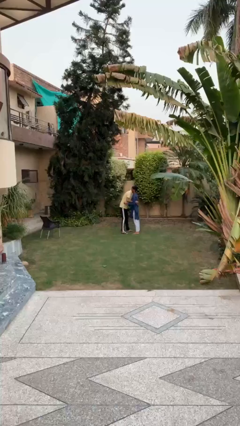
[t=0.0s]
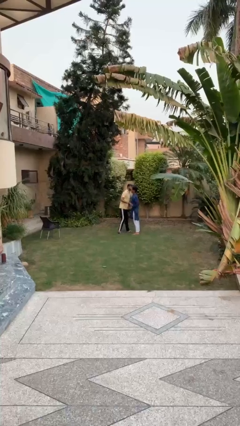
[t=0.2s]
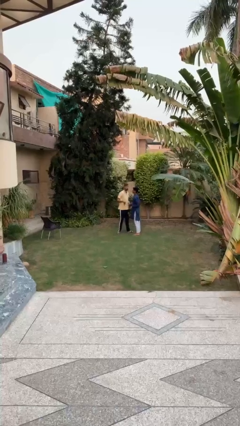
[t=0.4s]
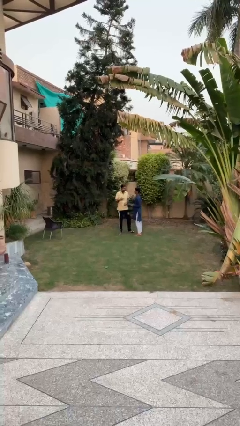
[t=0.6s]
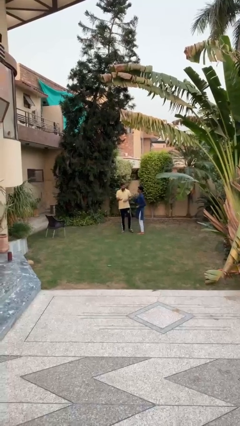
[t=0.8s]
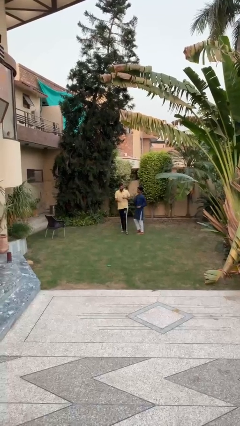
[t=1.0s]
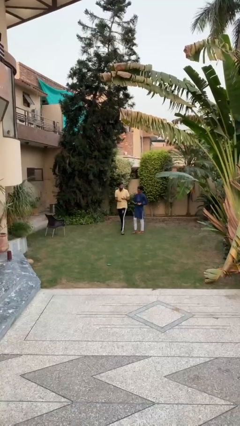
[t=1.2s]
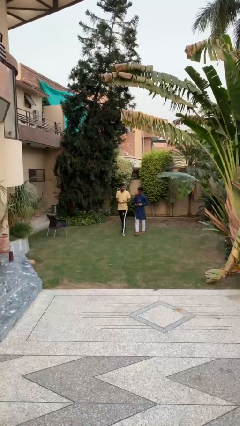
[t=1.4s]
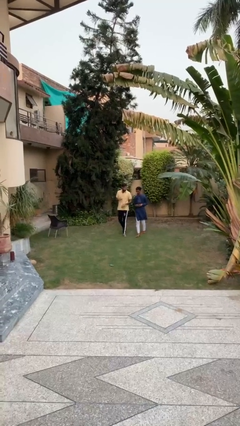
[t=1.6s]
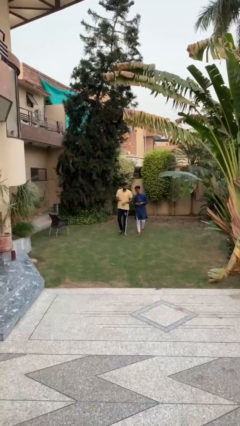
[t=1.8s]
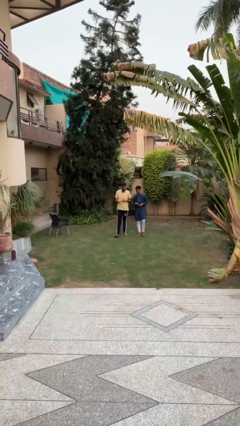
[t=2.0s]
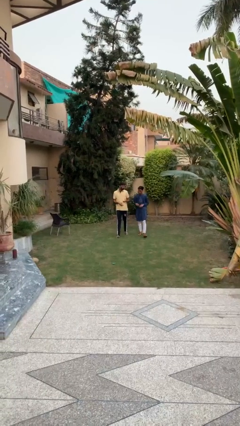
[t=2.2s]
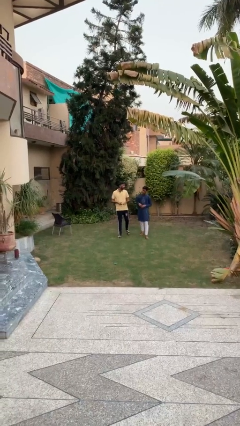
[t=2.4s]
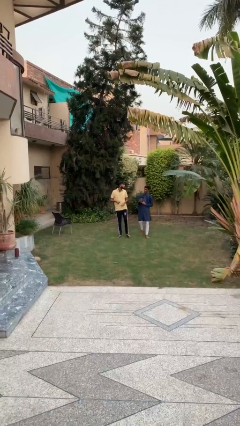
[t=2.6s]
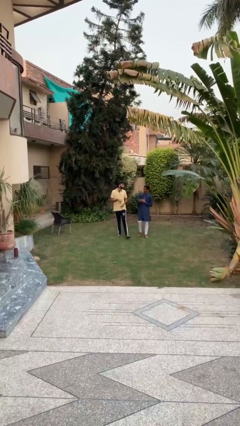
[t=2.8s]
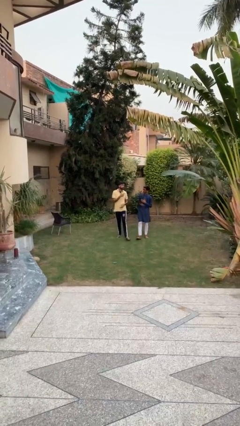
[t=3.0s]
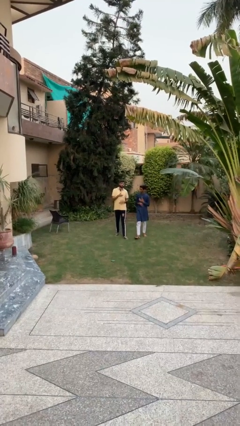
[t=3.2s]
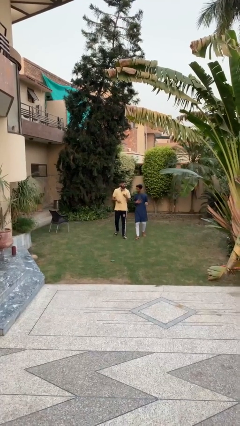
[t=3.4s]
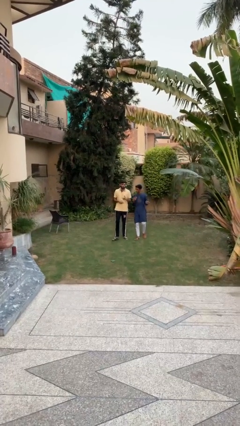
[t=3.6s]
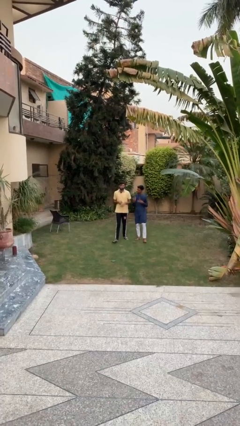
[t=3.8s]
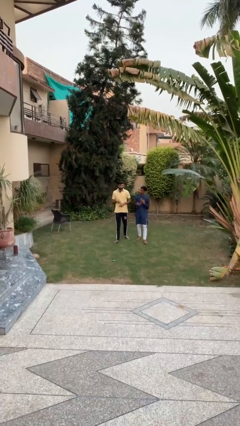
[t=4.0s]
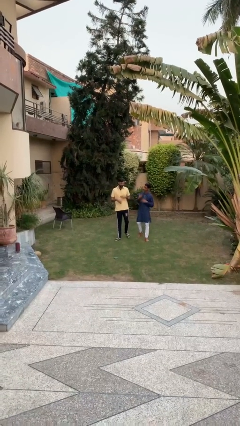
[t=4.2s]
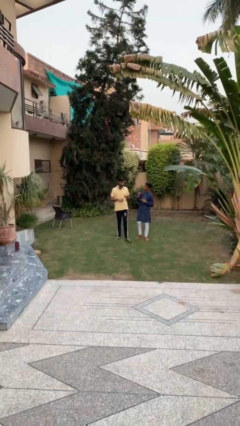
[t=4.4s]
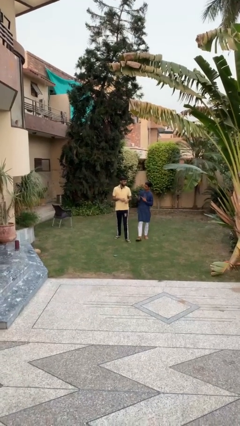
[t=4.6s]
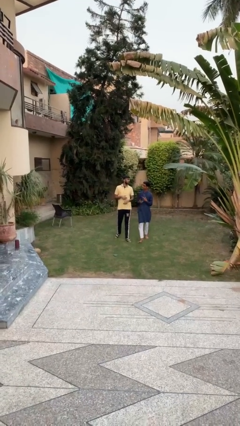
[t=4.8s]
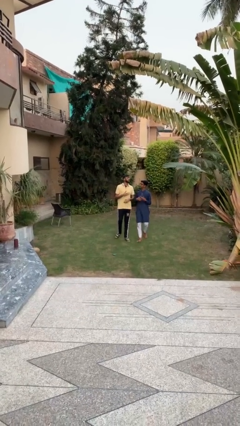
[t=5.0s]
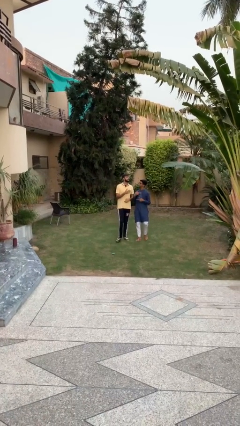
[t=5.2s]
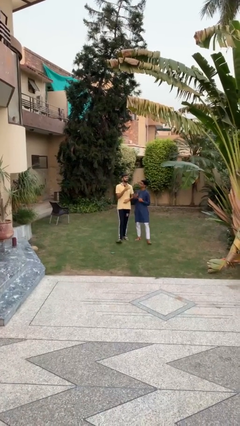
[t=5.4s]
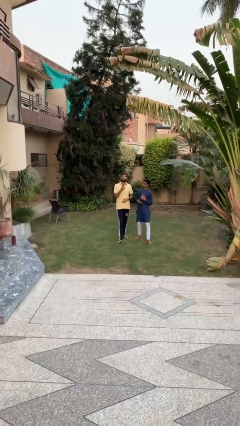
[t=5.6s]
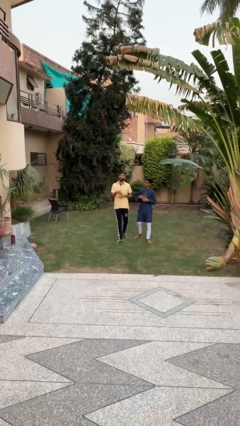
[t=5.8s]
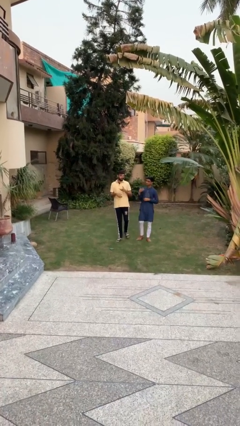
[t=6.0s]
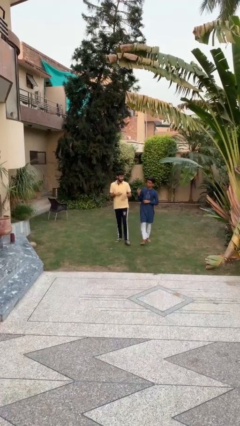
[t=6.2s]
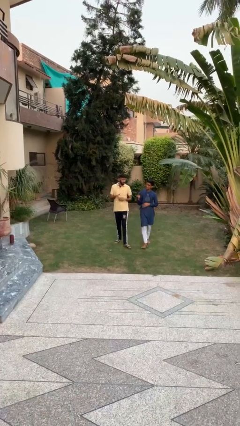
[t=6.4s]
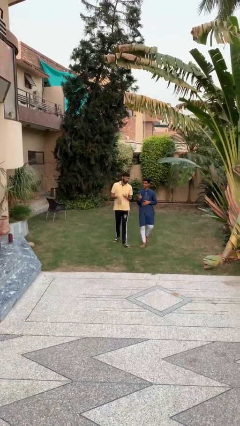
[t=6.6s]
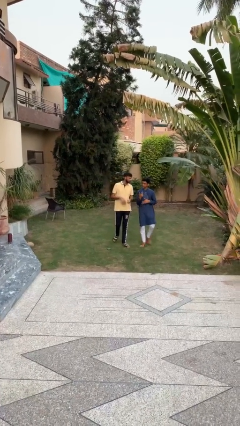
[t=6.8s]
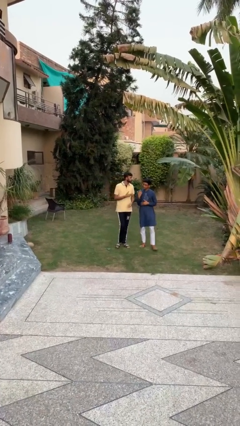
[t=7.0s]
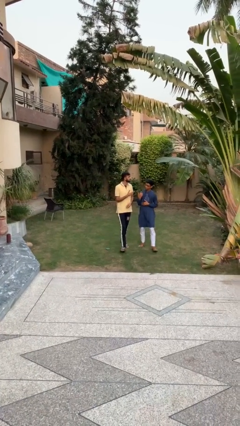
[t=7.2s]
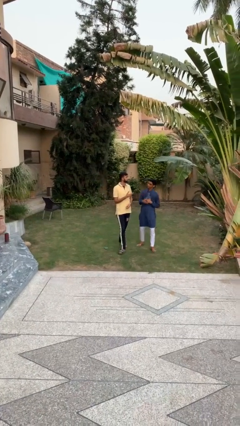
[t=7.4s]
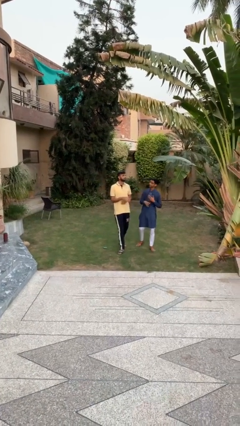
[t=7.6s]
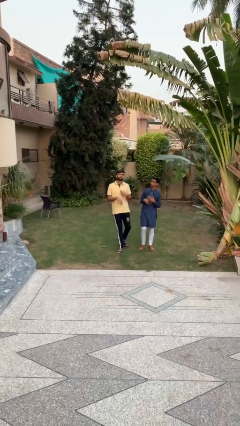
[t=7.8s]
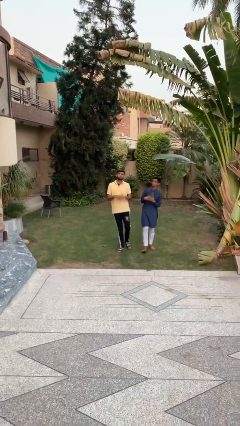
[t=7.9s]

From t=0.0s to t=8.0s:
person talks to person

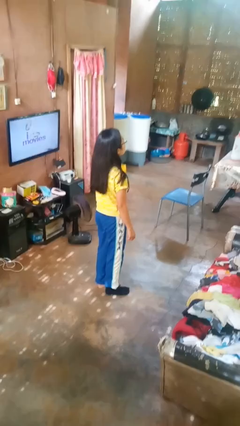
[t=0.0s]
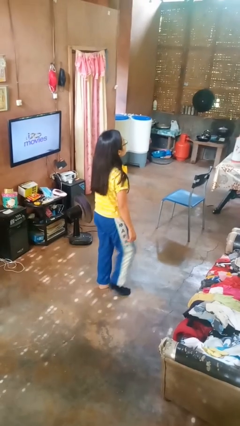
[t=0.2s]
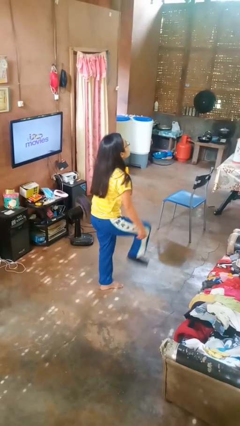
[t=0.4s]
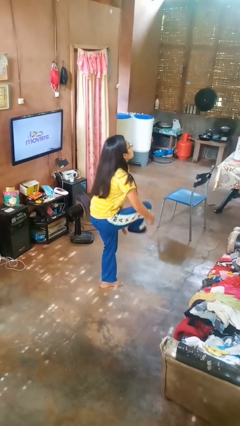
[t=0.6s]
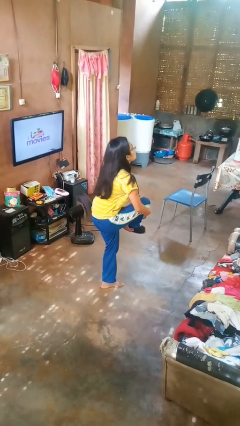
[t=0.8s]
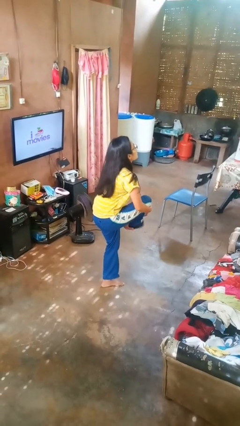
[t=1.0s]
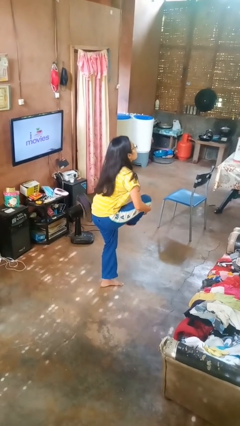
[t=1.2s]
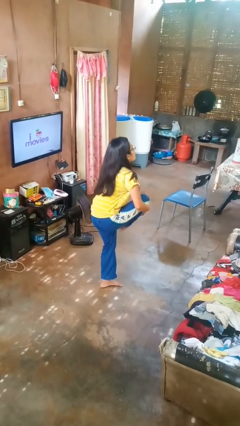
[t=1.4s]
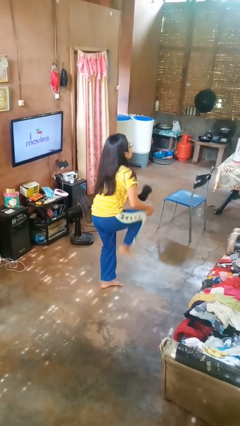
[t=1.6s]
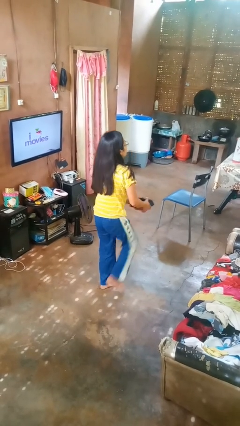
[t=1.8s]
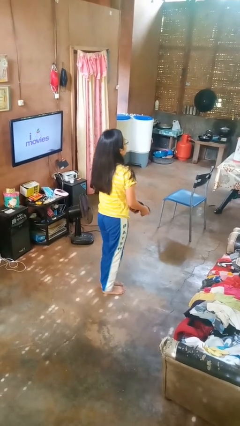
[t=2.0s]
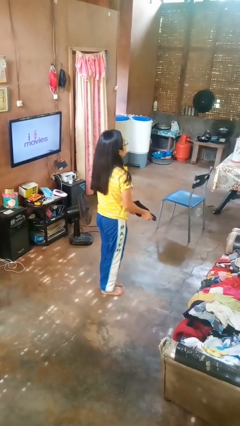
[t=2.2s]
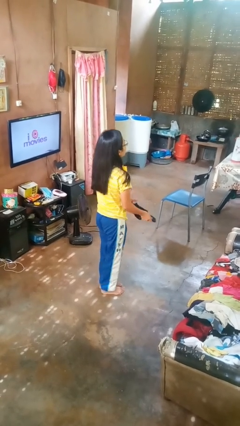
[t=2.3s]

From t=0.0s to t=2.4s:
person takes off socks

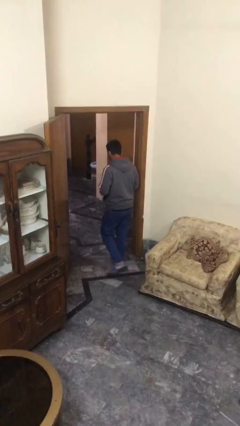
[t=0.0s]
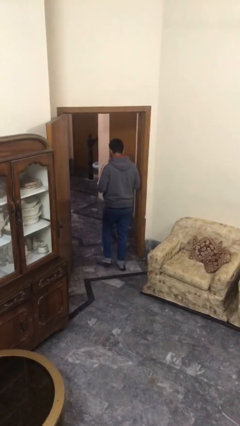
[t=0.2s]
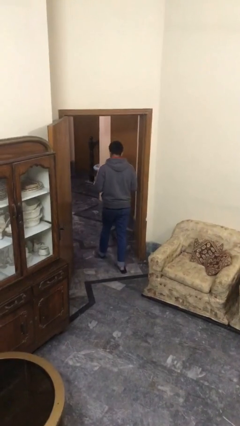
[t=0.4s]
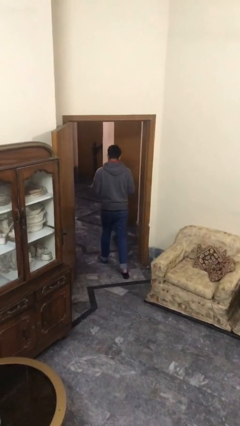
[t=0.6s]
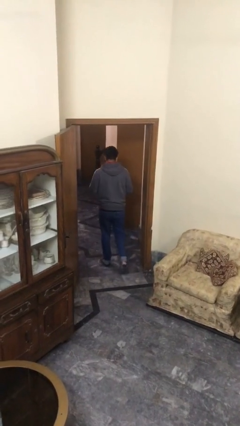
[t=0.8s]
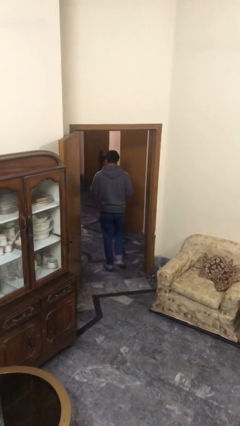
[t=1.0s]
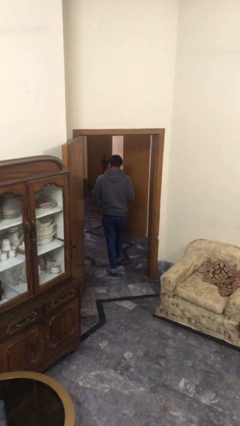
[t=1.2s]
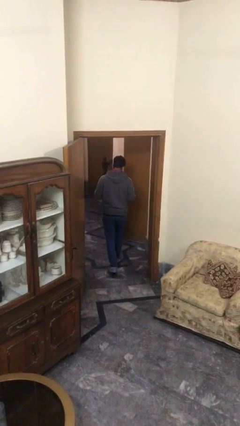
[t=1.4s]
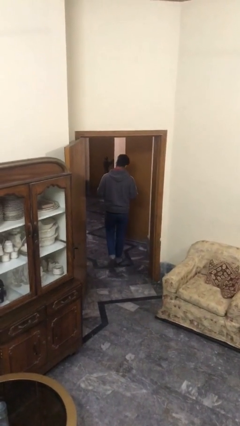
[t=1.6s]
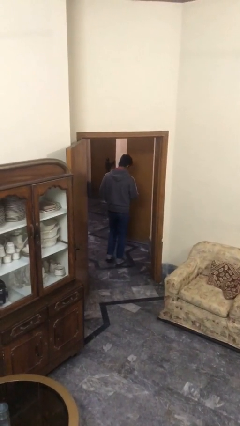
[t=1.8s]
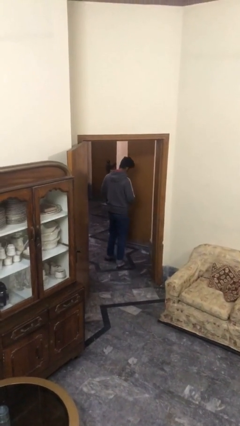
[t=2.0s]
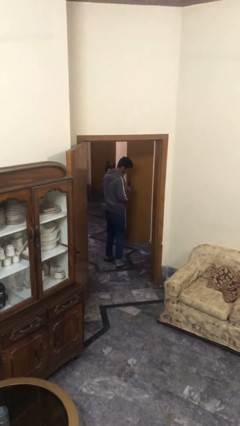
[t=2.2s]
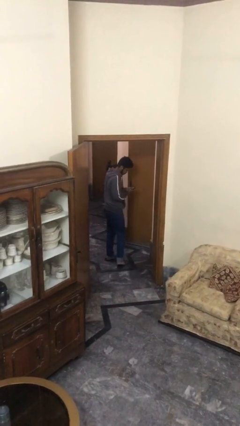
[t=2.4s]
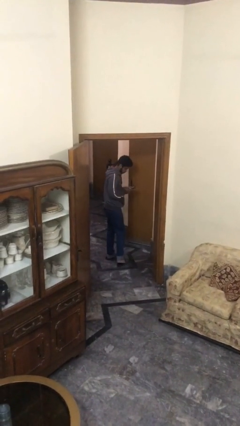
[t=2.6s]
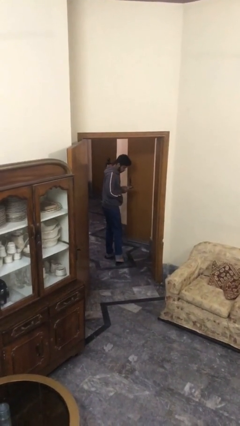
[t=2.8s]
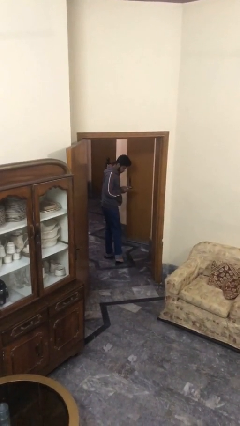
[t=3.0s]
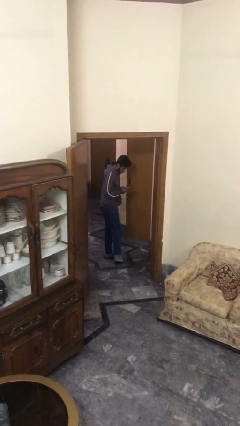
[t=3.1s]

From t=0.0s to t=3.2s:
person exits scene through structure

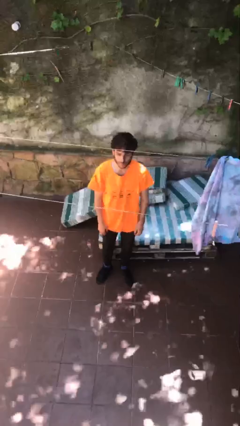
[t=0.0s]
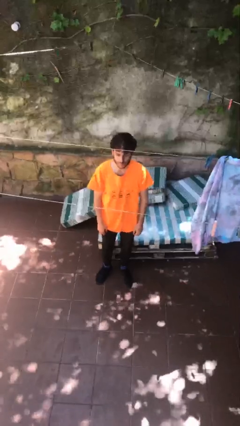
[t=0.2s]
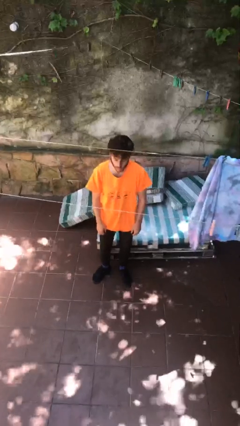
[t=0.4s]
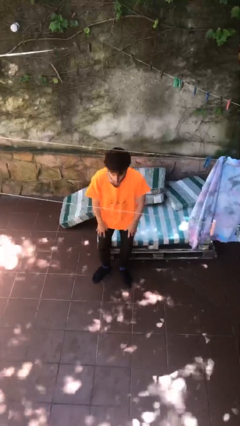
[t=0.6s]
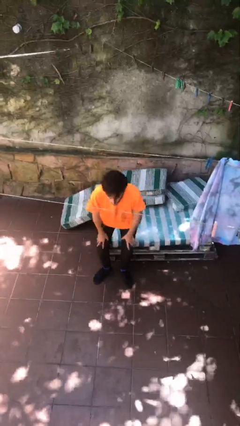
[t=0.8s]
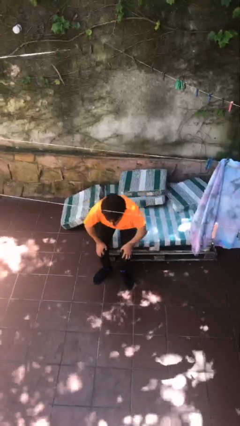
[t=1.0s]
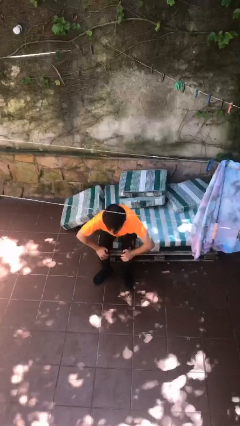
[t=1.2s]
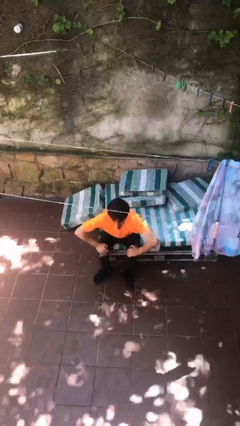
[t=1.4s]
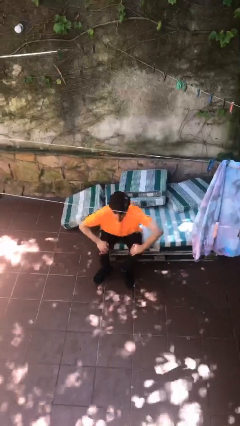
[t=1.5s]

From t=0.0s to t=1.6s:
person sits down

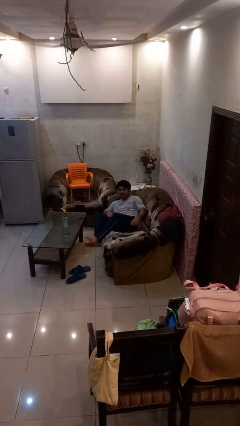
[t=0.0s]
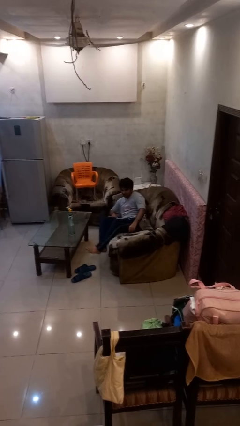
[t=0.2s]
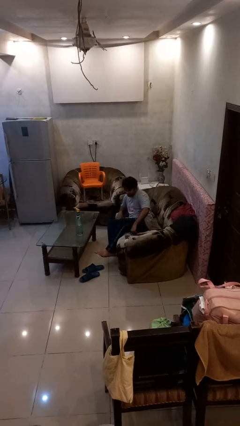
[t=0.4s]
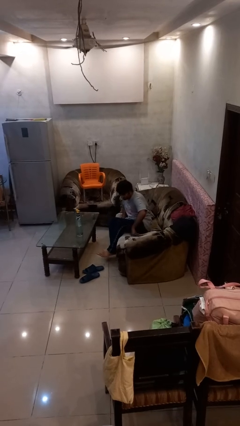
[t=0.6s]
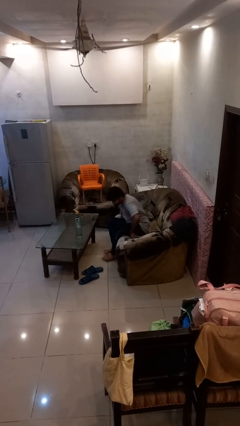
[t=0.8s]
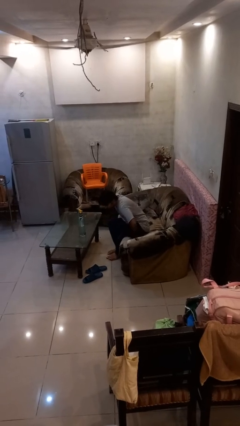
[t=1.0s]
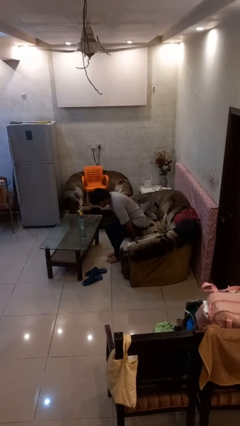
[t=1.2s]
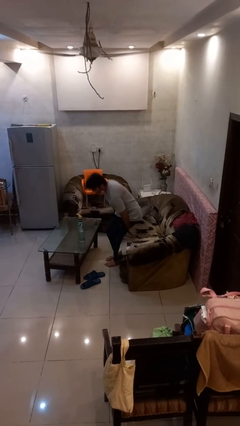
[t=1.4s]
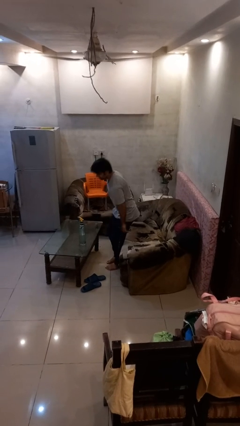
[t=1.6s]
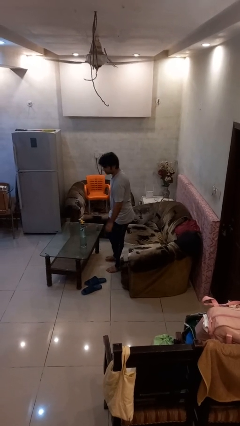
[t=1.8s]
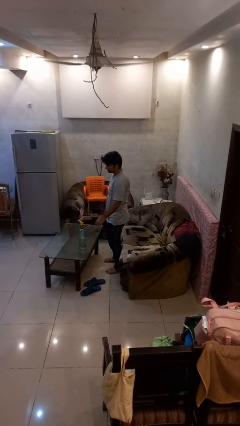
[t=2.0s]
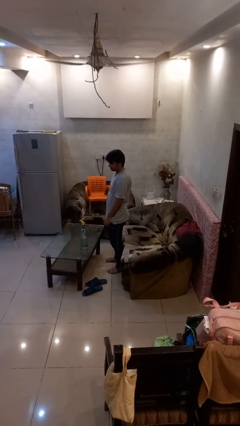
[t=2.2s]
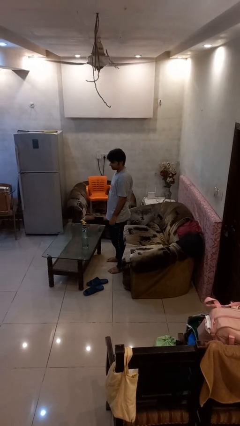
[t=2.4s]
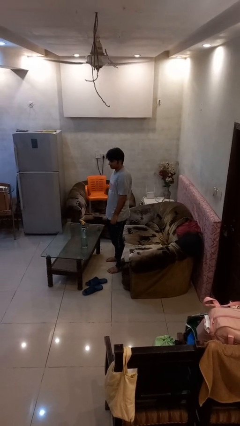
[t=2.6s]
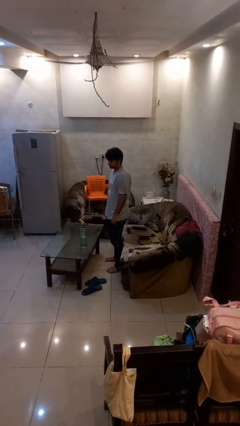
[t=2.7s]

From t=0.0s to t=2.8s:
person stands up
